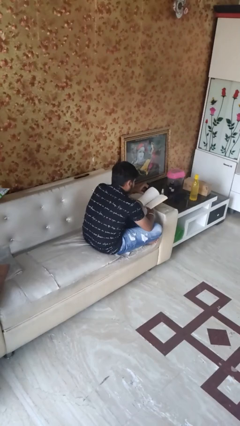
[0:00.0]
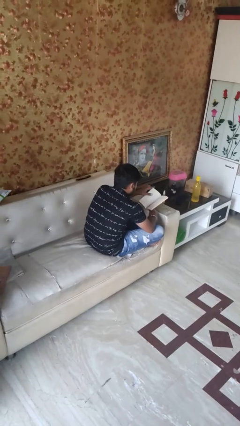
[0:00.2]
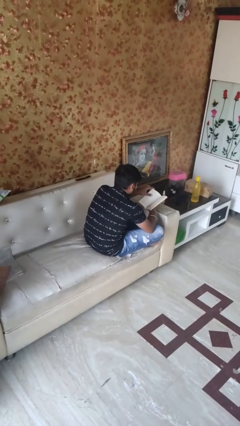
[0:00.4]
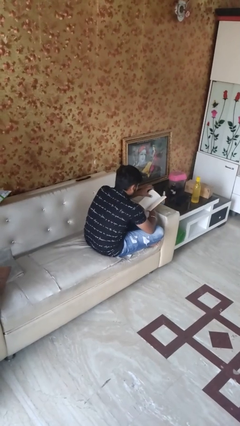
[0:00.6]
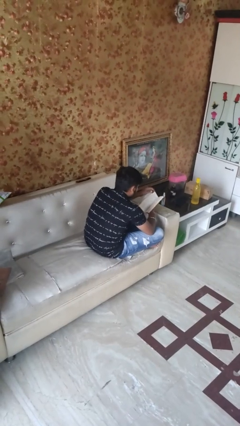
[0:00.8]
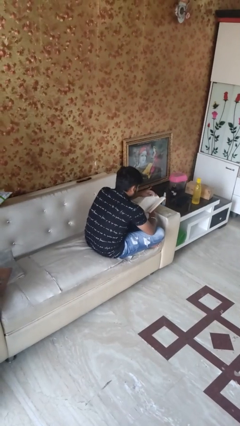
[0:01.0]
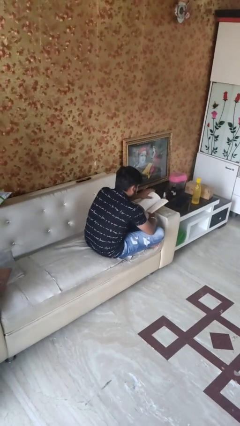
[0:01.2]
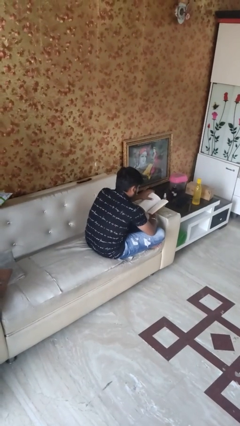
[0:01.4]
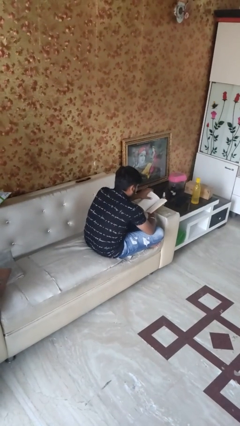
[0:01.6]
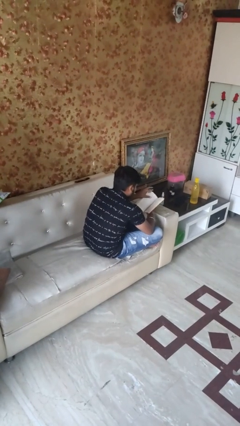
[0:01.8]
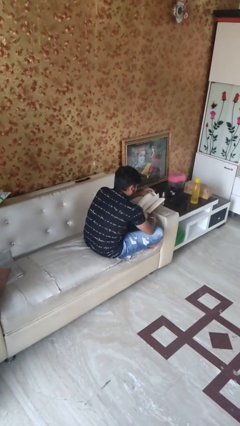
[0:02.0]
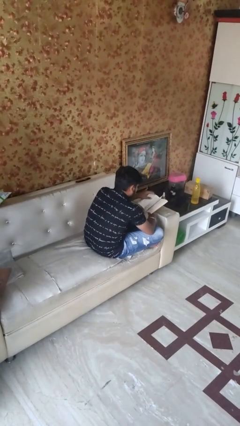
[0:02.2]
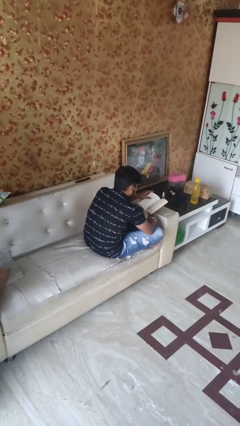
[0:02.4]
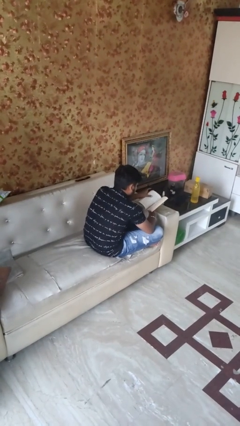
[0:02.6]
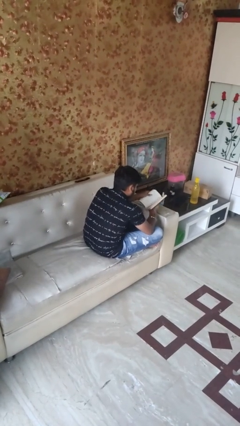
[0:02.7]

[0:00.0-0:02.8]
person reads book

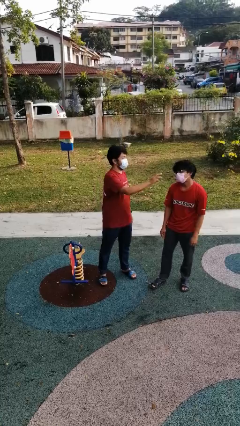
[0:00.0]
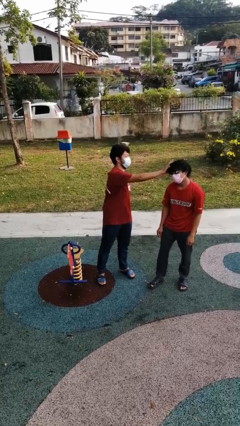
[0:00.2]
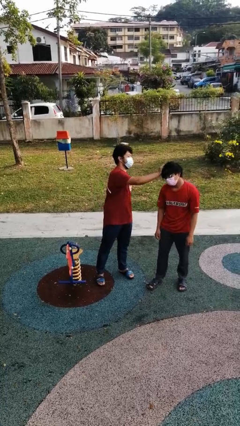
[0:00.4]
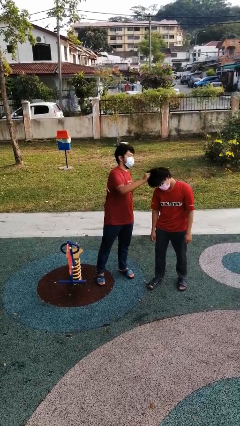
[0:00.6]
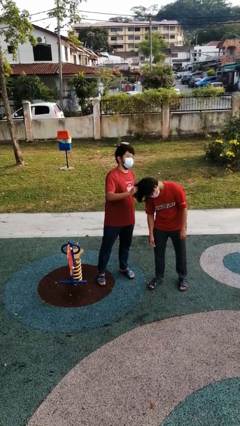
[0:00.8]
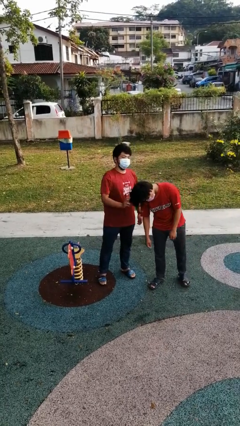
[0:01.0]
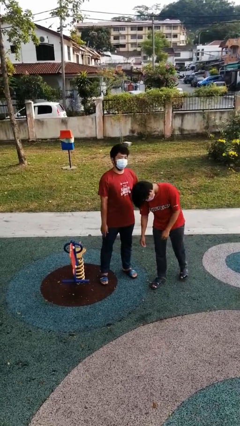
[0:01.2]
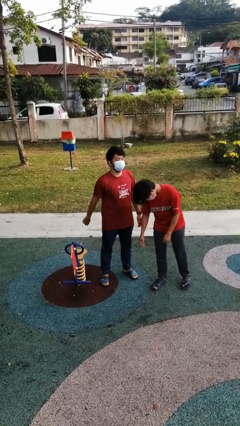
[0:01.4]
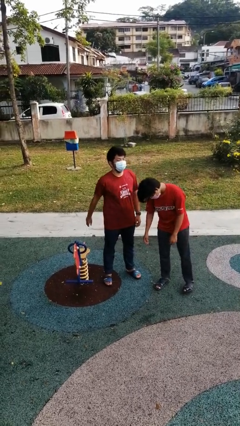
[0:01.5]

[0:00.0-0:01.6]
person grabs person by hair

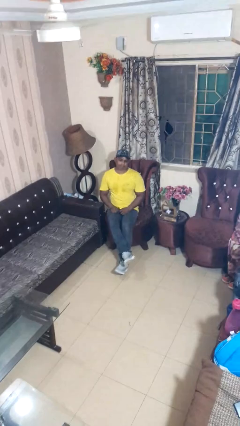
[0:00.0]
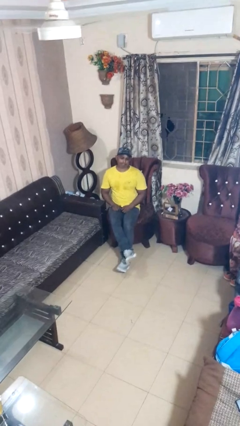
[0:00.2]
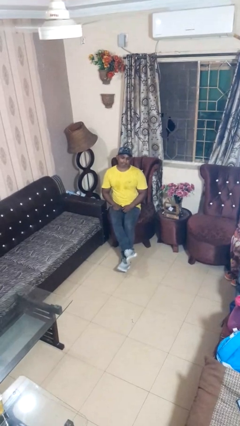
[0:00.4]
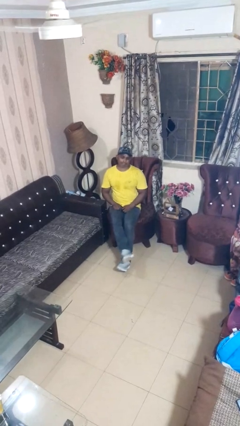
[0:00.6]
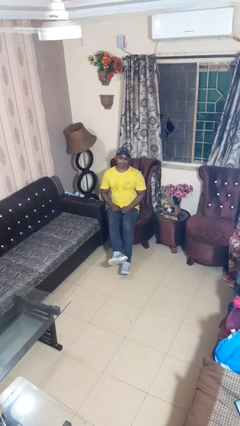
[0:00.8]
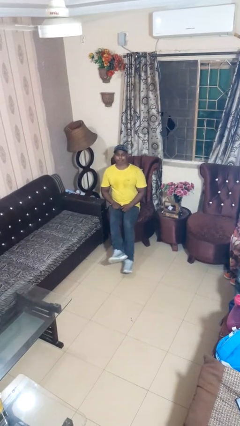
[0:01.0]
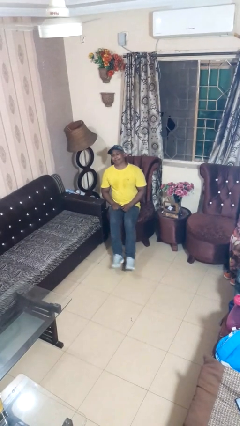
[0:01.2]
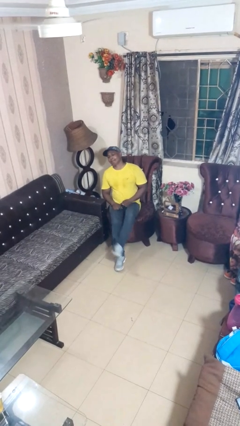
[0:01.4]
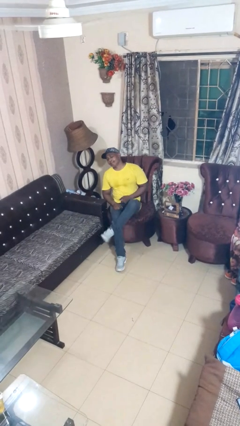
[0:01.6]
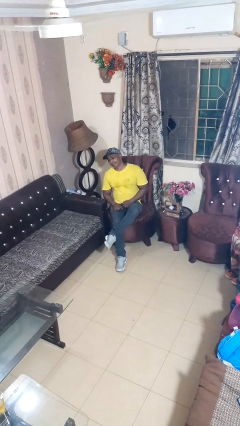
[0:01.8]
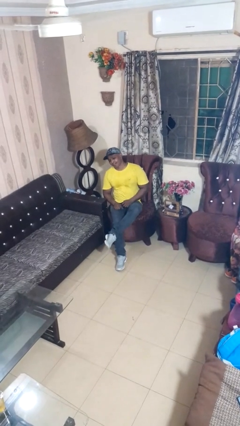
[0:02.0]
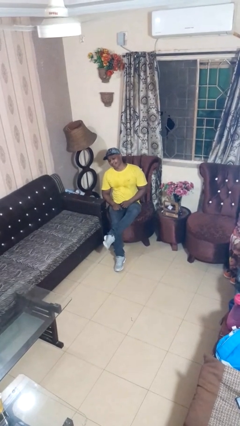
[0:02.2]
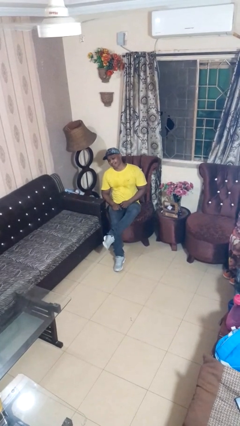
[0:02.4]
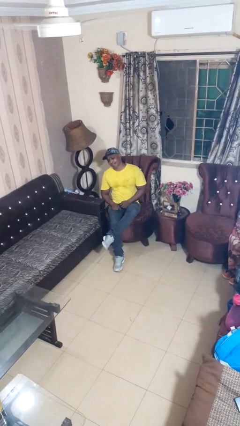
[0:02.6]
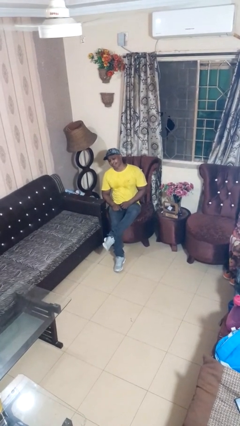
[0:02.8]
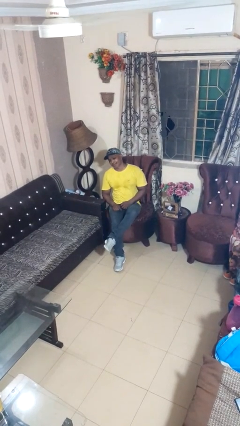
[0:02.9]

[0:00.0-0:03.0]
person crosses legs

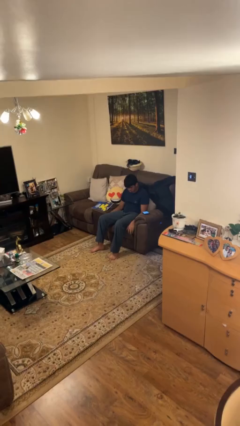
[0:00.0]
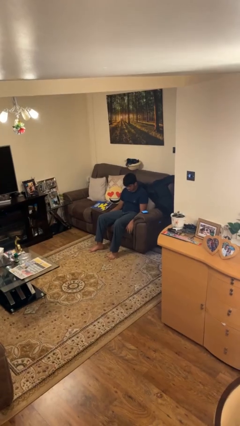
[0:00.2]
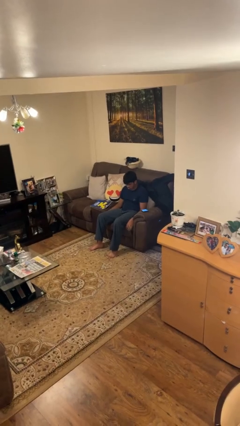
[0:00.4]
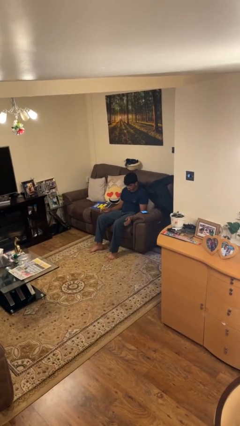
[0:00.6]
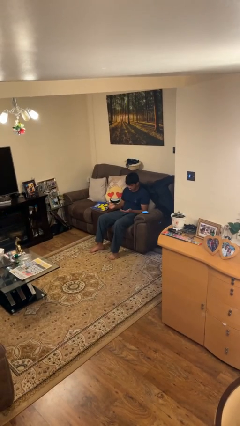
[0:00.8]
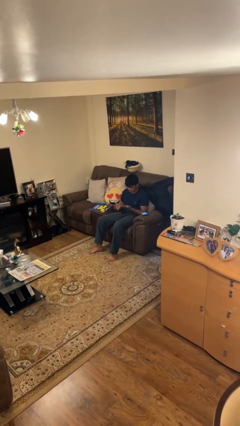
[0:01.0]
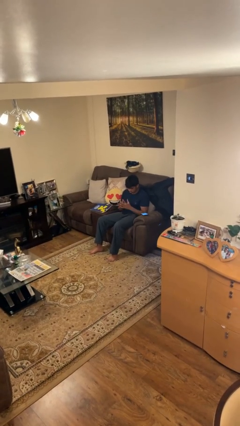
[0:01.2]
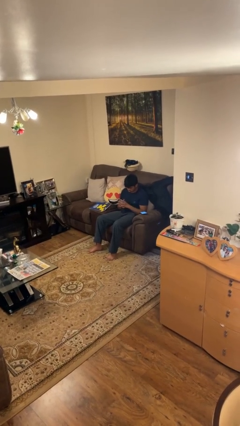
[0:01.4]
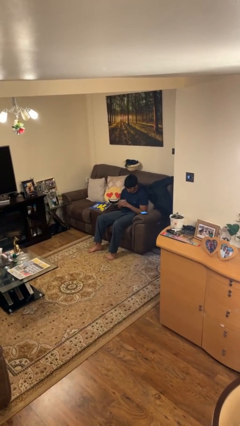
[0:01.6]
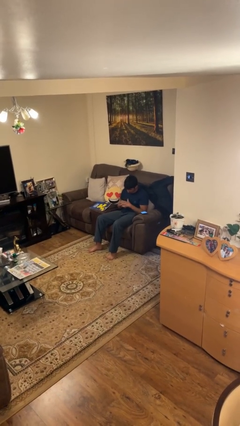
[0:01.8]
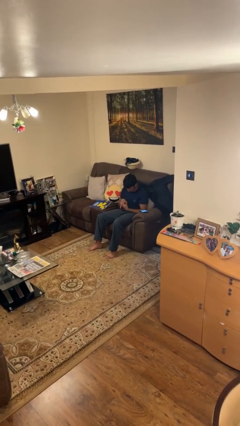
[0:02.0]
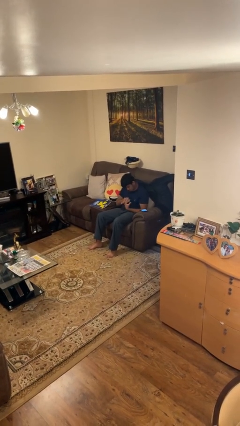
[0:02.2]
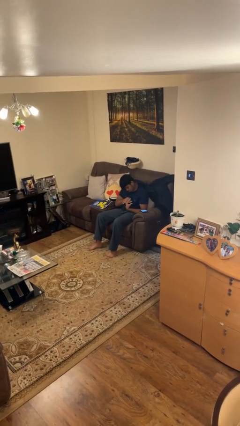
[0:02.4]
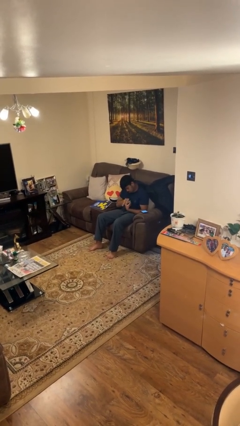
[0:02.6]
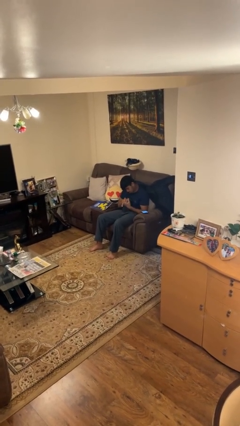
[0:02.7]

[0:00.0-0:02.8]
person looks at hands in lap

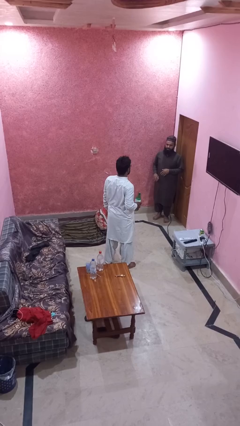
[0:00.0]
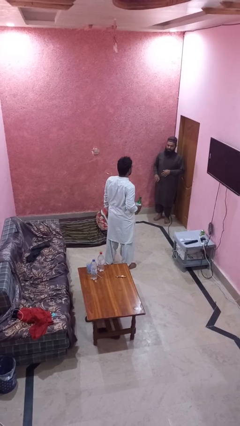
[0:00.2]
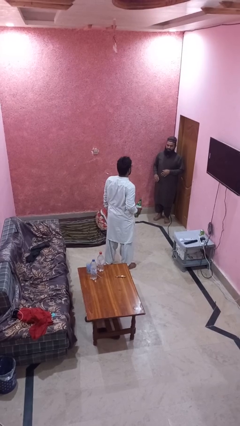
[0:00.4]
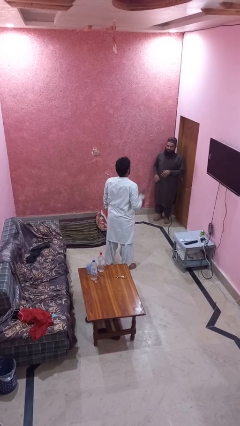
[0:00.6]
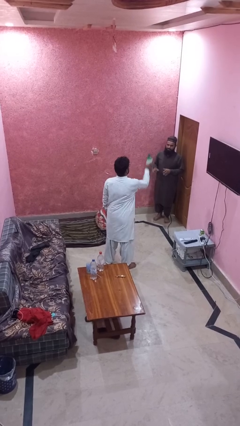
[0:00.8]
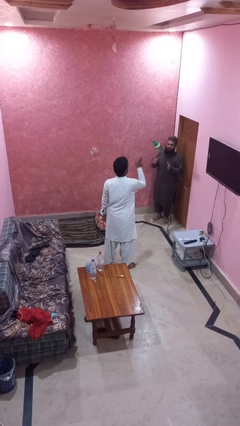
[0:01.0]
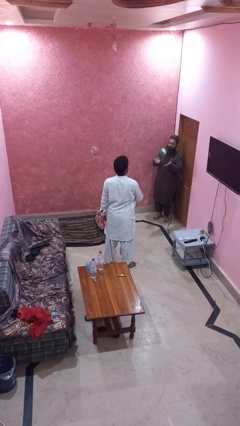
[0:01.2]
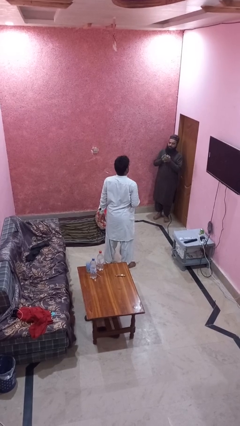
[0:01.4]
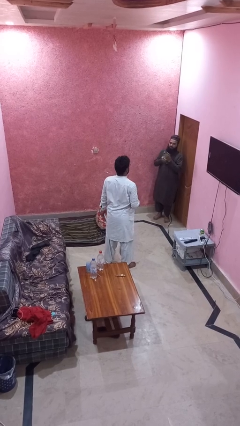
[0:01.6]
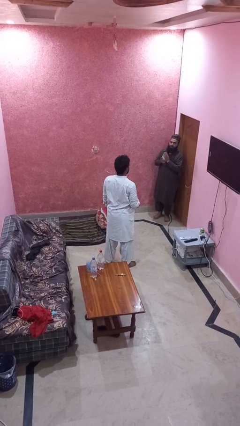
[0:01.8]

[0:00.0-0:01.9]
person throws object to person

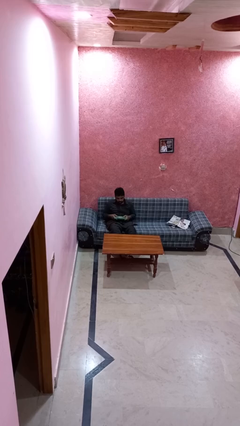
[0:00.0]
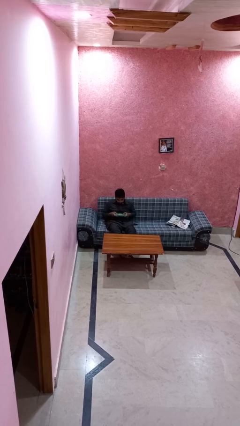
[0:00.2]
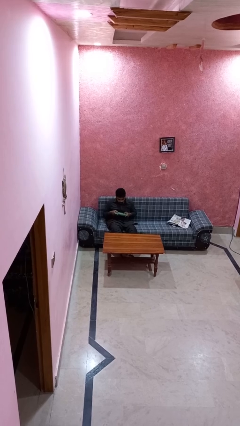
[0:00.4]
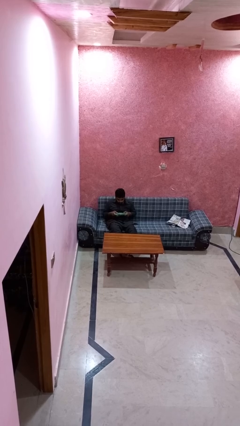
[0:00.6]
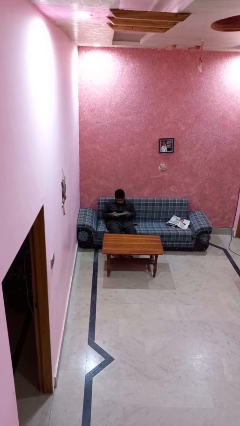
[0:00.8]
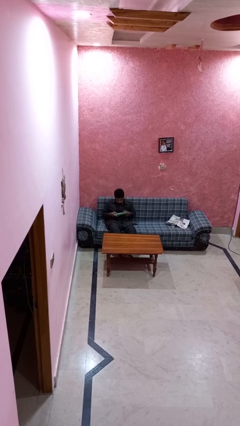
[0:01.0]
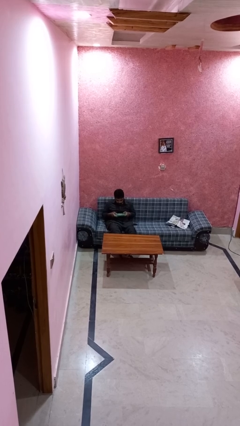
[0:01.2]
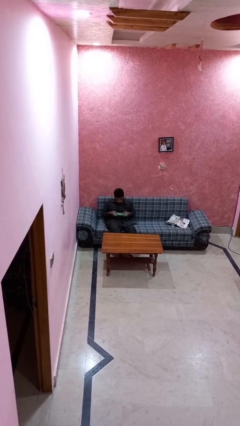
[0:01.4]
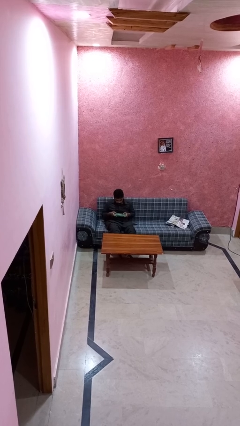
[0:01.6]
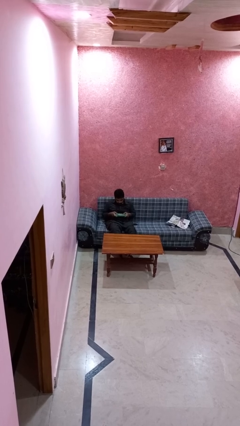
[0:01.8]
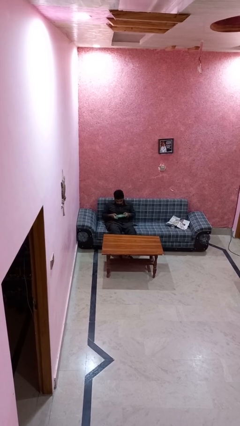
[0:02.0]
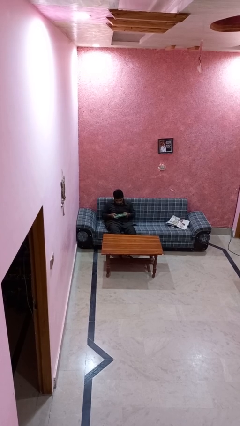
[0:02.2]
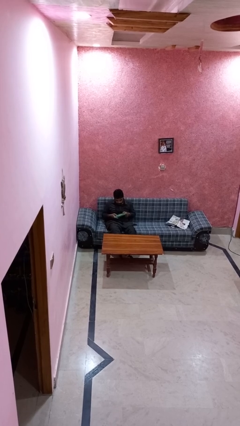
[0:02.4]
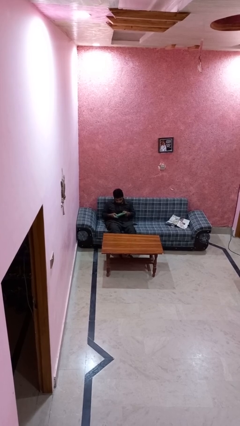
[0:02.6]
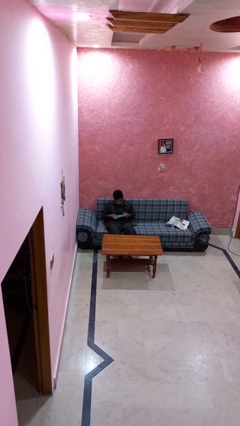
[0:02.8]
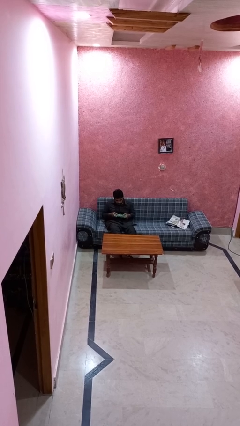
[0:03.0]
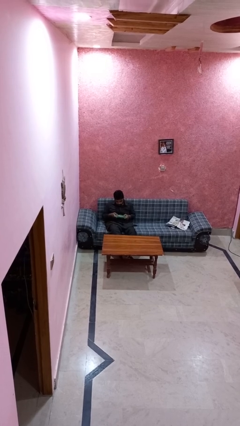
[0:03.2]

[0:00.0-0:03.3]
person interacts with handheld game

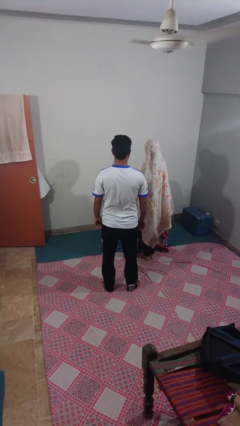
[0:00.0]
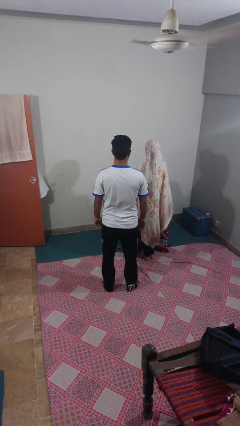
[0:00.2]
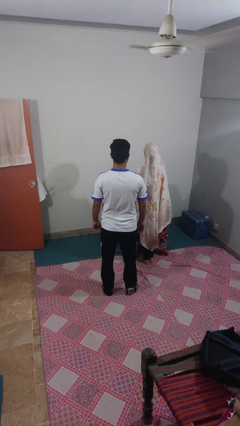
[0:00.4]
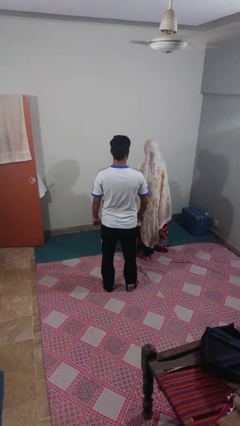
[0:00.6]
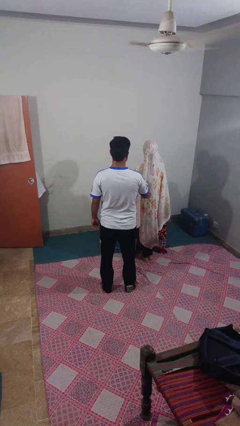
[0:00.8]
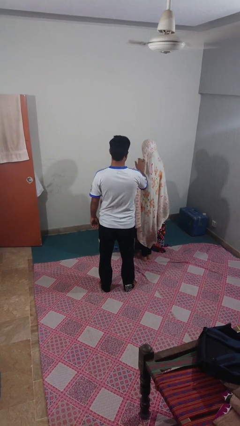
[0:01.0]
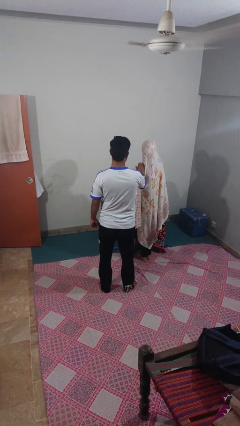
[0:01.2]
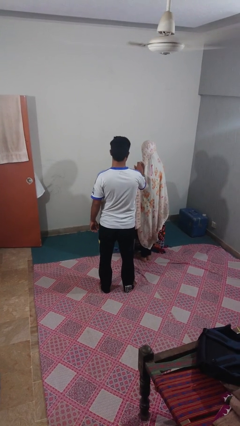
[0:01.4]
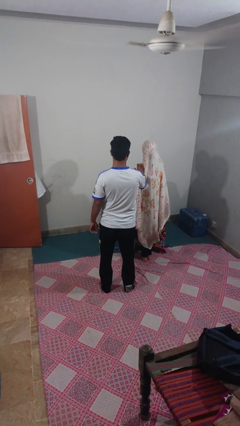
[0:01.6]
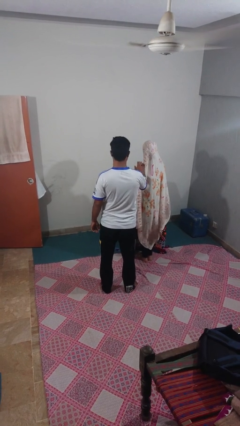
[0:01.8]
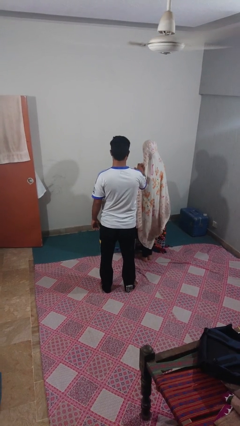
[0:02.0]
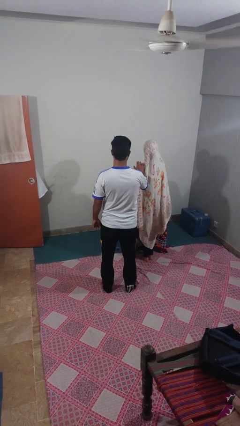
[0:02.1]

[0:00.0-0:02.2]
person touches back of person
